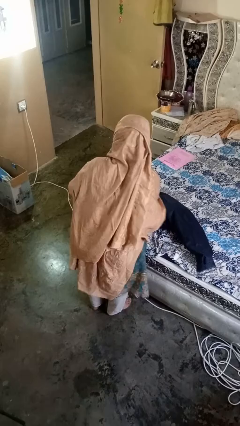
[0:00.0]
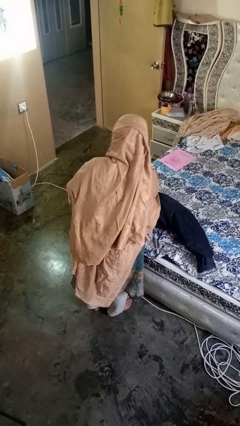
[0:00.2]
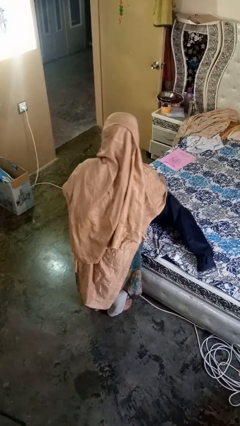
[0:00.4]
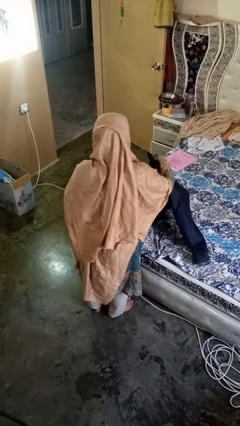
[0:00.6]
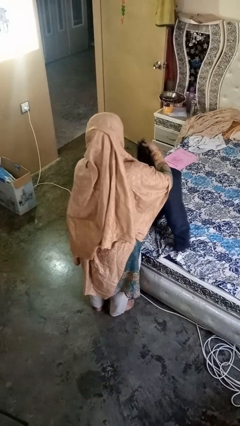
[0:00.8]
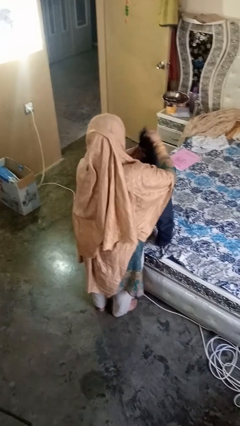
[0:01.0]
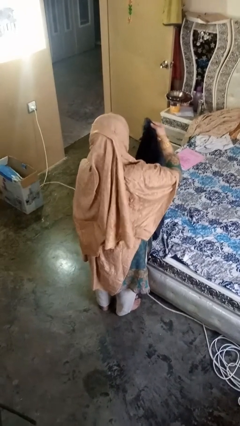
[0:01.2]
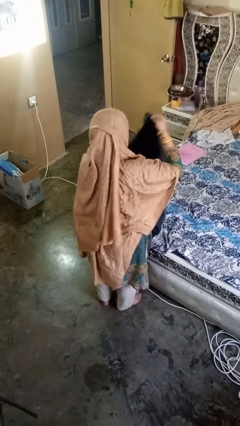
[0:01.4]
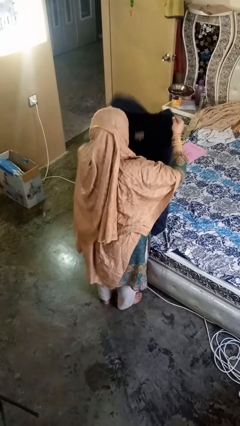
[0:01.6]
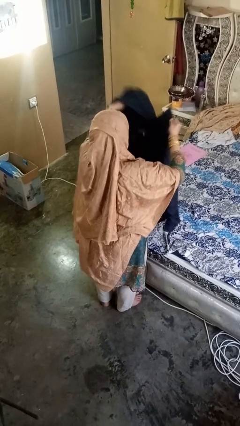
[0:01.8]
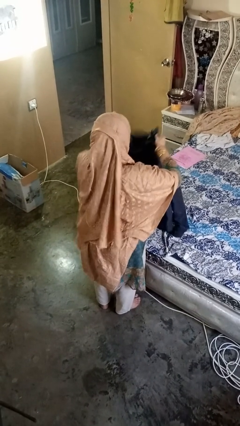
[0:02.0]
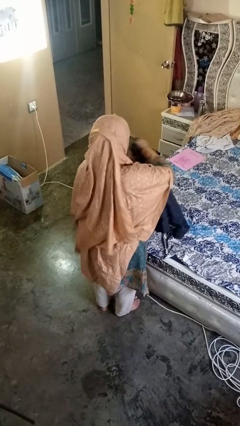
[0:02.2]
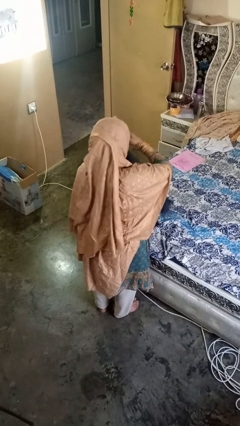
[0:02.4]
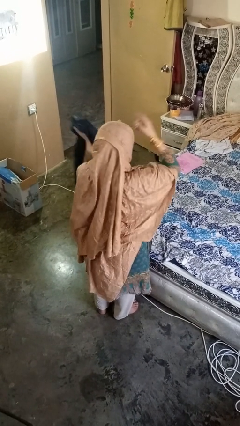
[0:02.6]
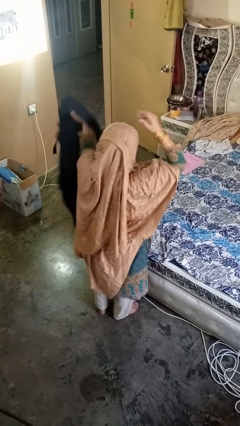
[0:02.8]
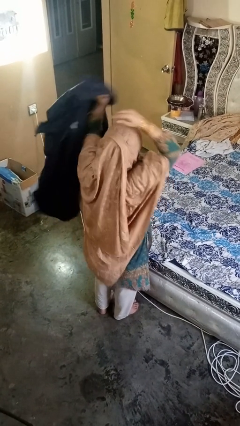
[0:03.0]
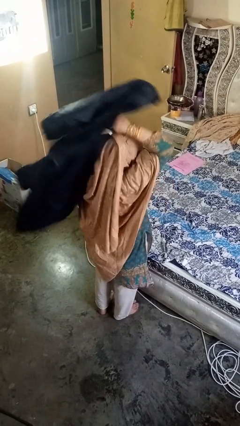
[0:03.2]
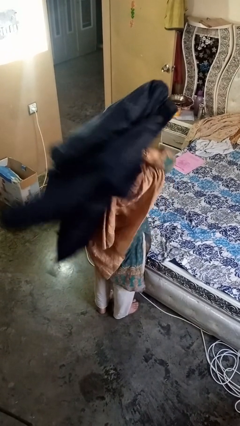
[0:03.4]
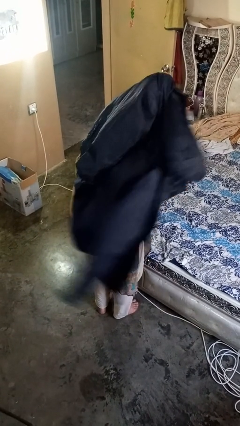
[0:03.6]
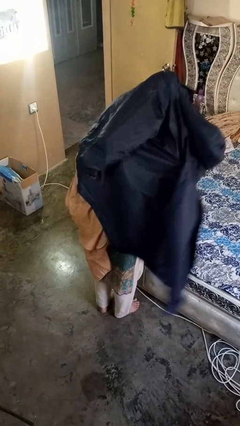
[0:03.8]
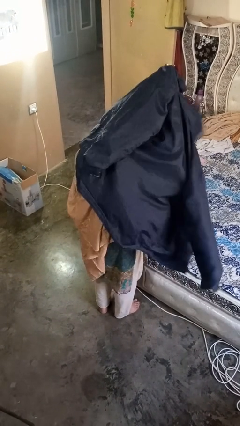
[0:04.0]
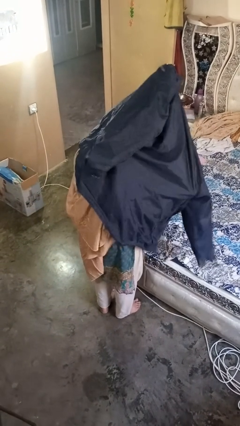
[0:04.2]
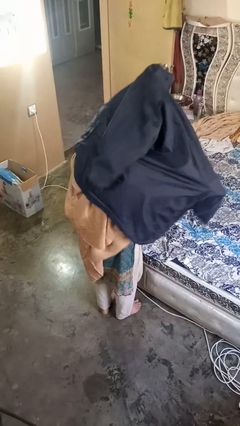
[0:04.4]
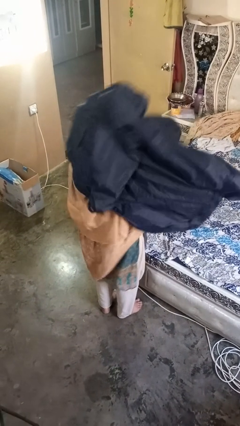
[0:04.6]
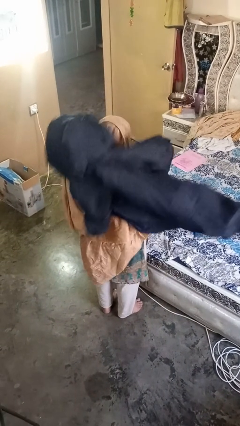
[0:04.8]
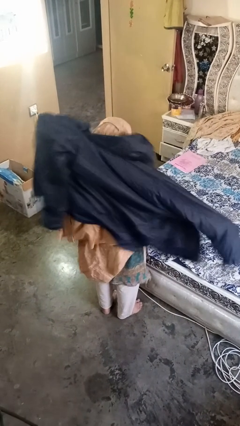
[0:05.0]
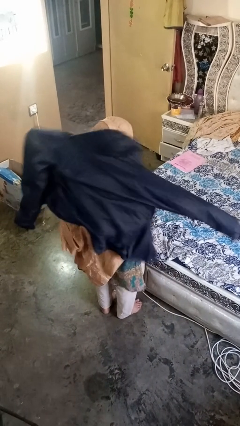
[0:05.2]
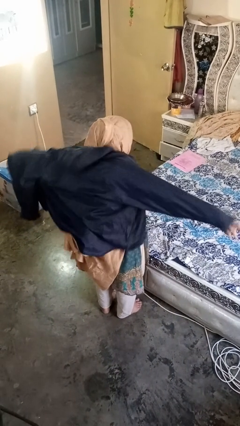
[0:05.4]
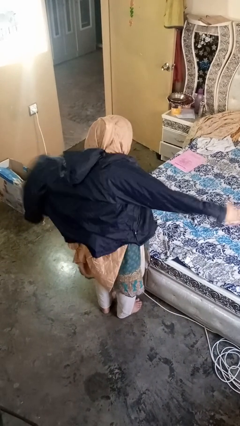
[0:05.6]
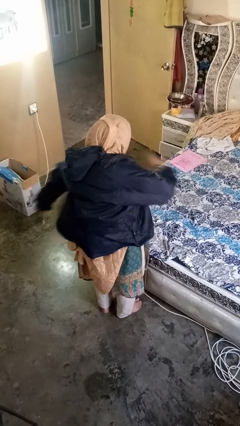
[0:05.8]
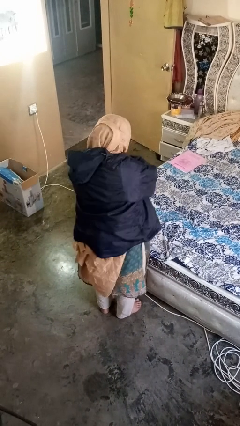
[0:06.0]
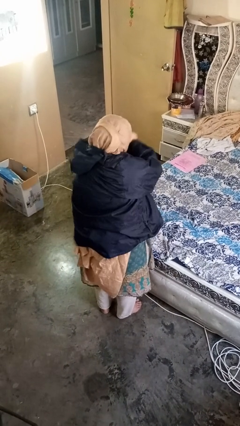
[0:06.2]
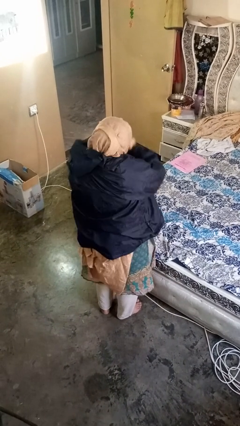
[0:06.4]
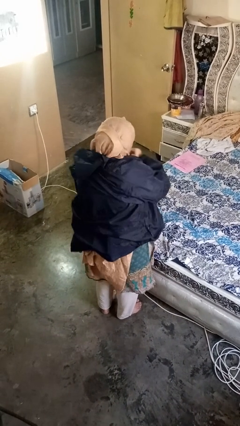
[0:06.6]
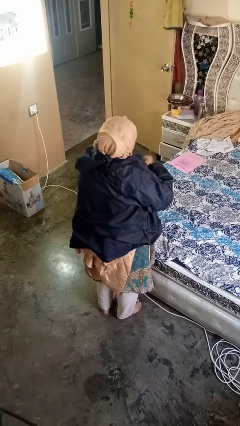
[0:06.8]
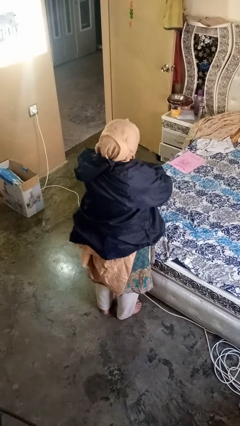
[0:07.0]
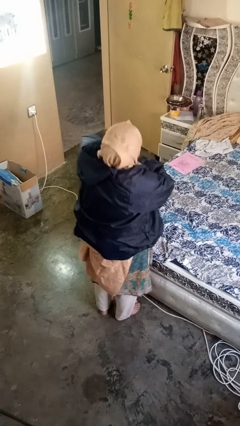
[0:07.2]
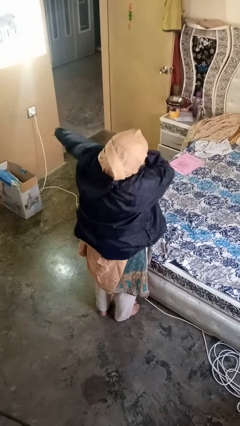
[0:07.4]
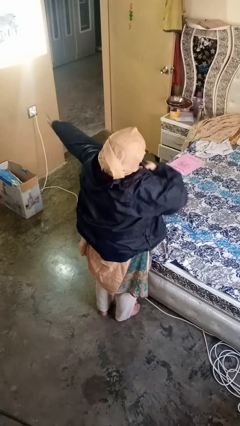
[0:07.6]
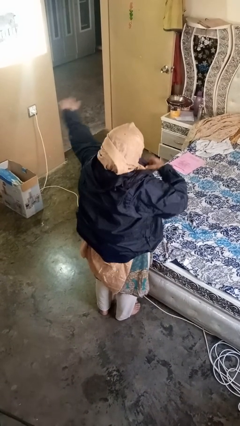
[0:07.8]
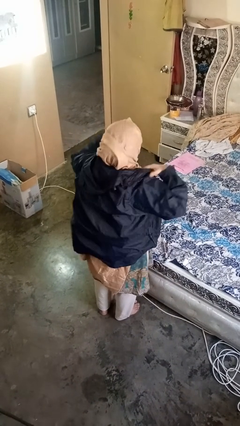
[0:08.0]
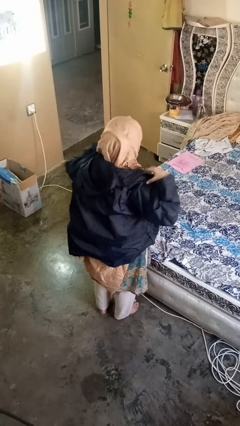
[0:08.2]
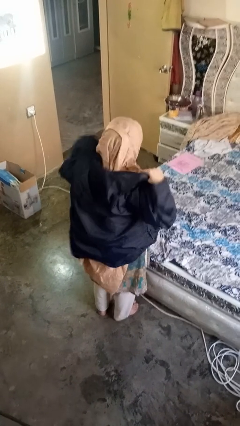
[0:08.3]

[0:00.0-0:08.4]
person puts on jacket

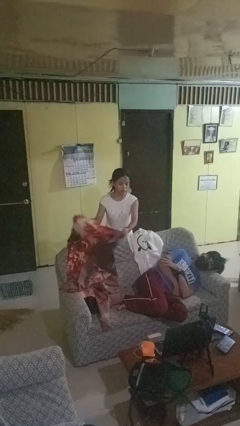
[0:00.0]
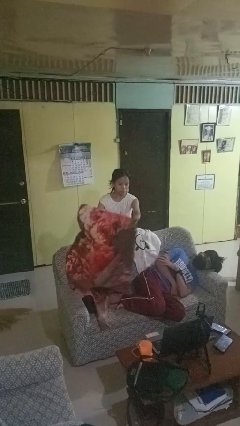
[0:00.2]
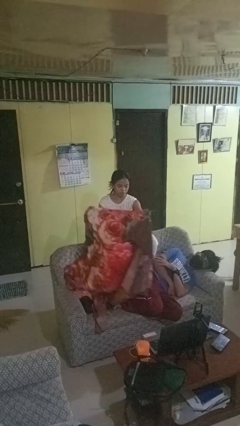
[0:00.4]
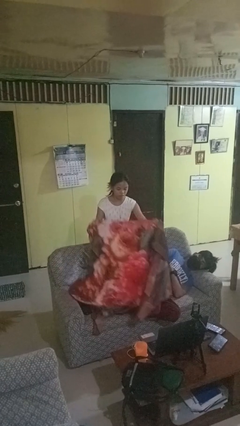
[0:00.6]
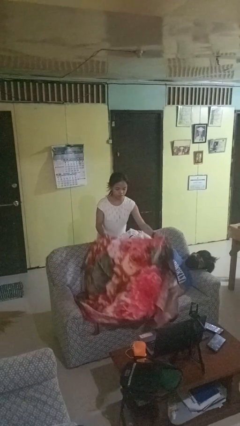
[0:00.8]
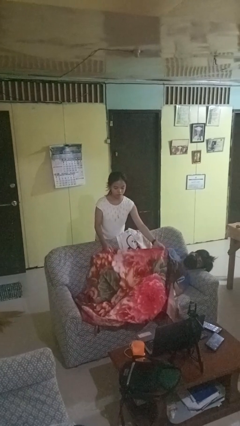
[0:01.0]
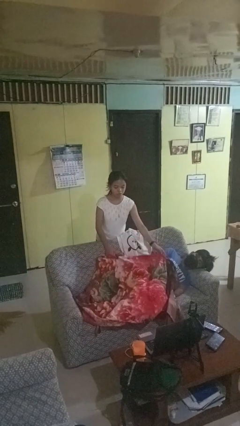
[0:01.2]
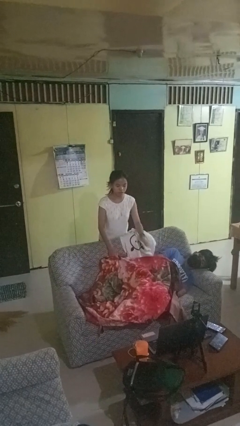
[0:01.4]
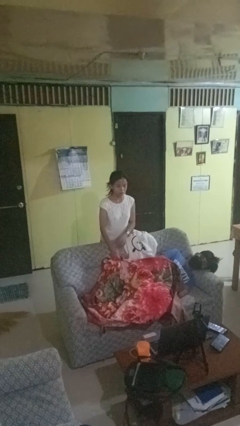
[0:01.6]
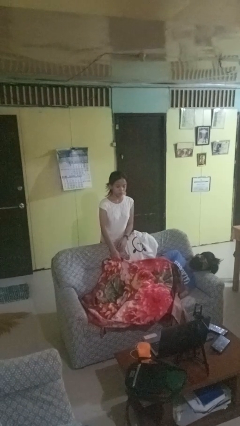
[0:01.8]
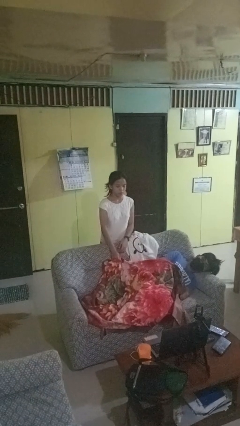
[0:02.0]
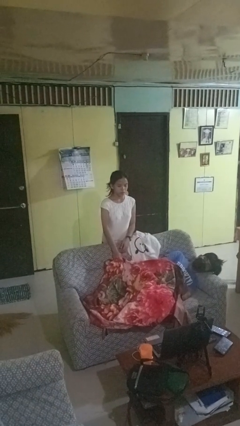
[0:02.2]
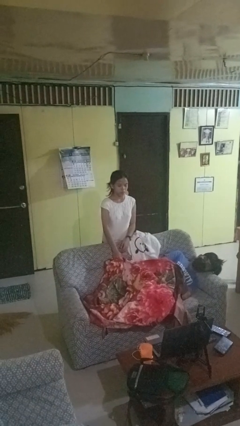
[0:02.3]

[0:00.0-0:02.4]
person covers friend with blanket

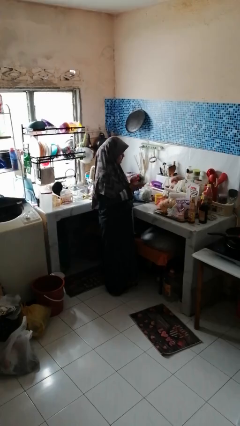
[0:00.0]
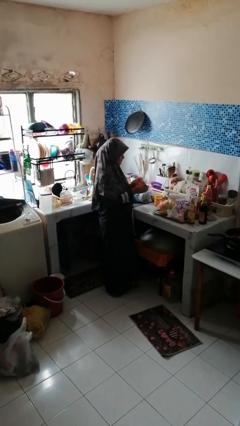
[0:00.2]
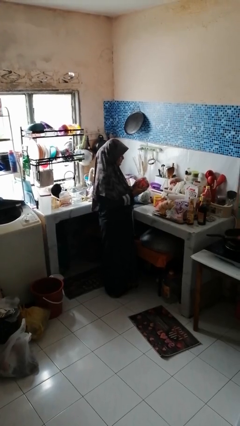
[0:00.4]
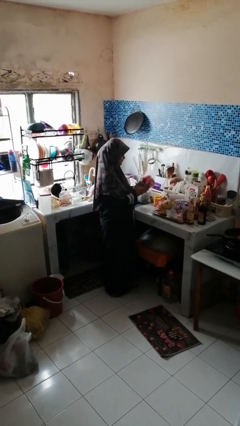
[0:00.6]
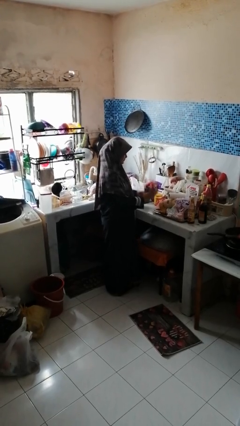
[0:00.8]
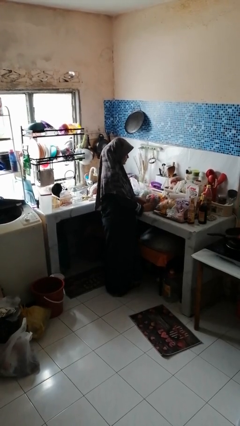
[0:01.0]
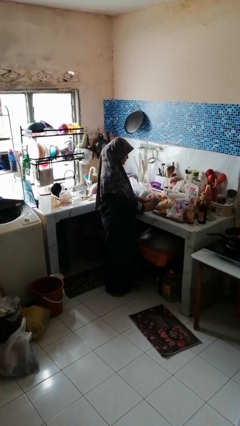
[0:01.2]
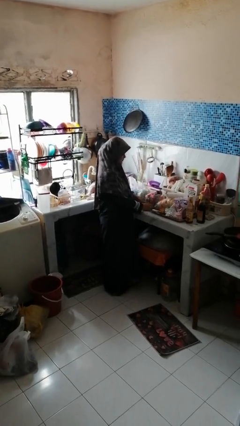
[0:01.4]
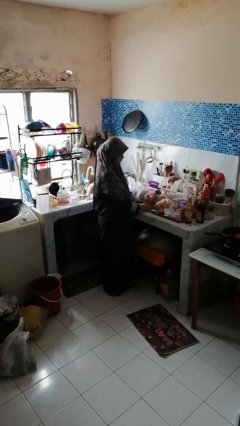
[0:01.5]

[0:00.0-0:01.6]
person puts down object on countertop

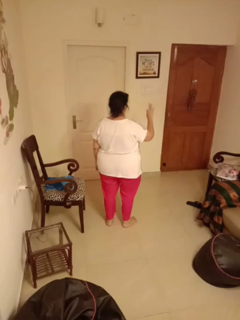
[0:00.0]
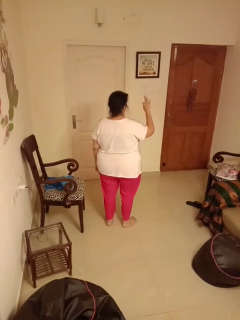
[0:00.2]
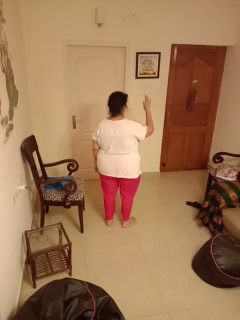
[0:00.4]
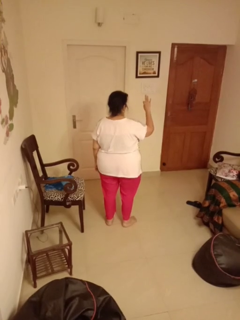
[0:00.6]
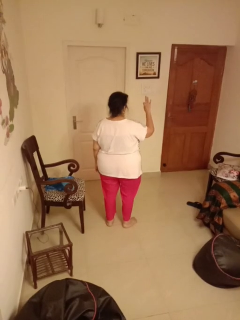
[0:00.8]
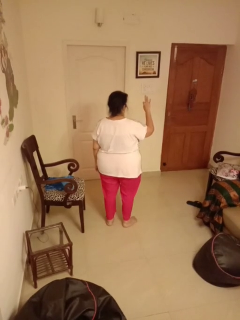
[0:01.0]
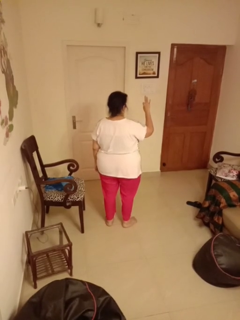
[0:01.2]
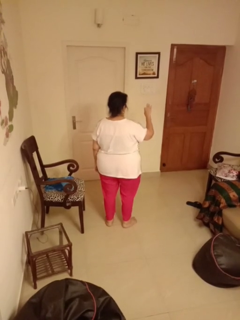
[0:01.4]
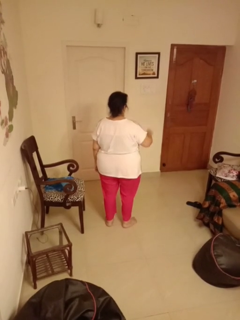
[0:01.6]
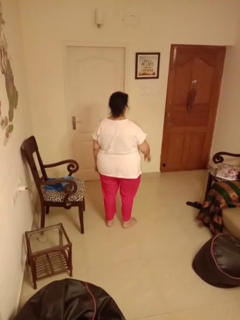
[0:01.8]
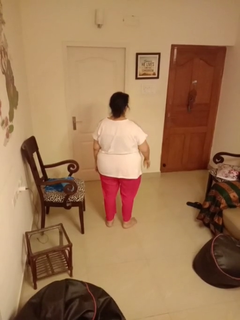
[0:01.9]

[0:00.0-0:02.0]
person gestures number three

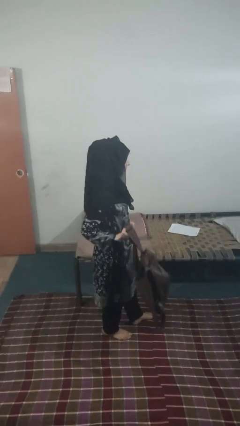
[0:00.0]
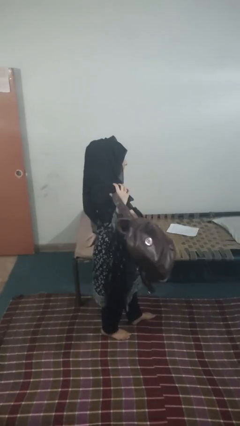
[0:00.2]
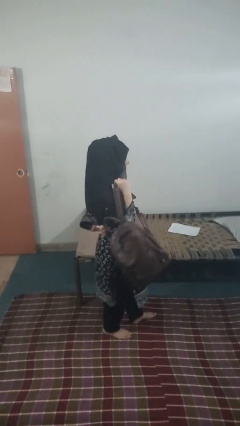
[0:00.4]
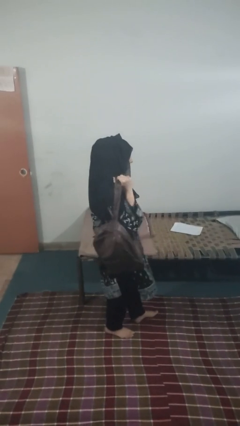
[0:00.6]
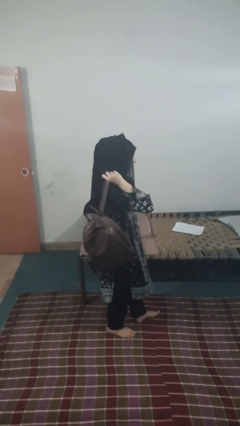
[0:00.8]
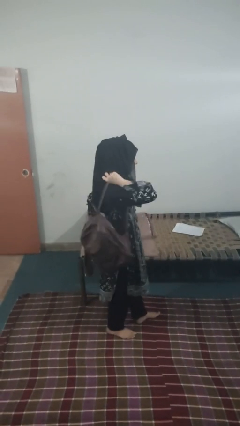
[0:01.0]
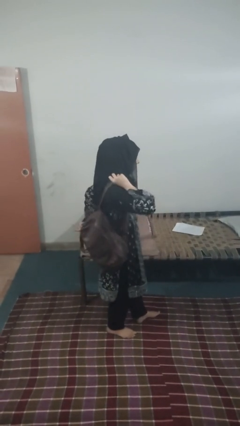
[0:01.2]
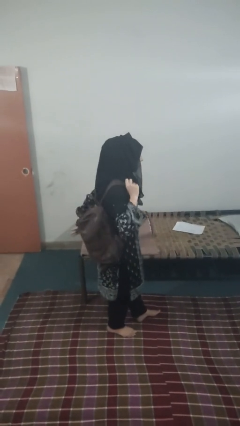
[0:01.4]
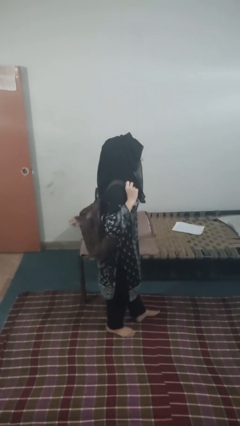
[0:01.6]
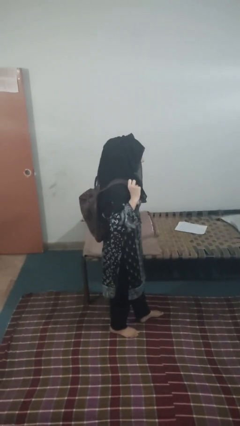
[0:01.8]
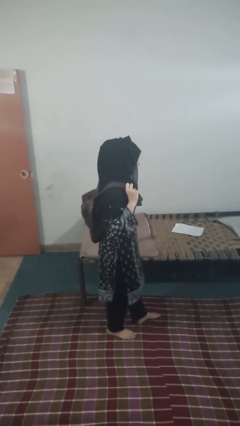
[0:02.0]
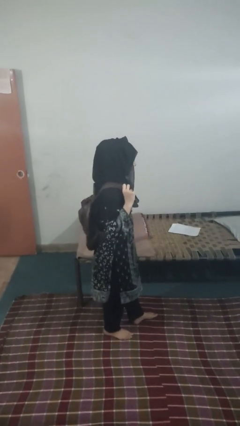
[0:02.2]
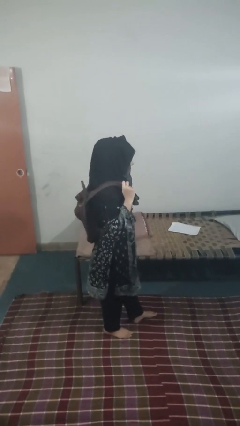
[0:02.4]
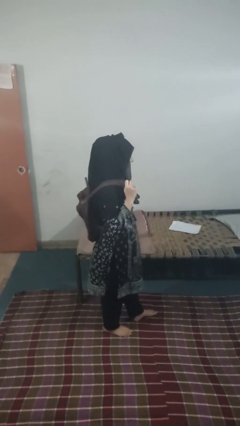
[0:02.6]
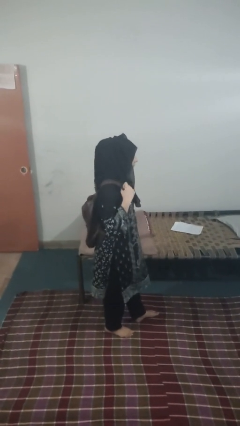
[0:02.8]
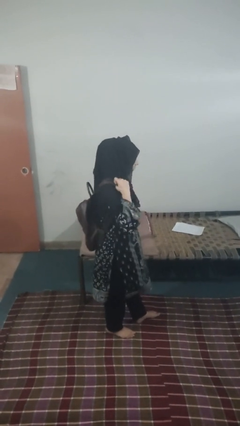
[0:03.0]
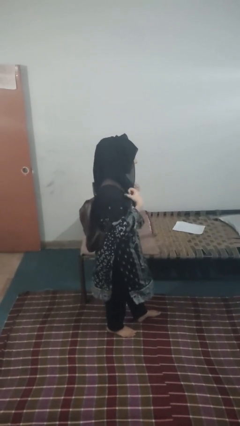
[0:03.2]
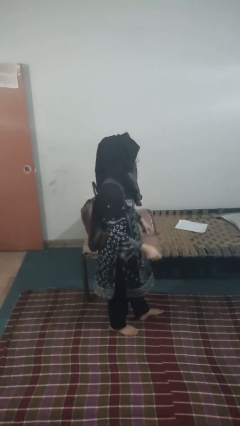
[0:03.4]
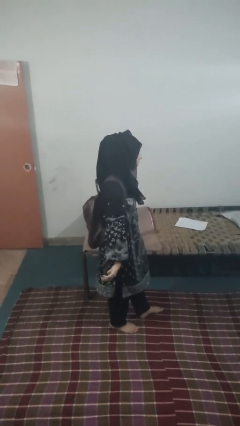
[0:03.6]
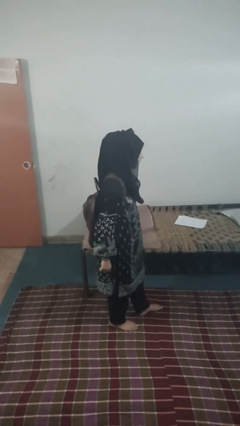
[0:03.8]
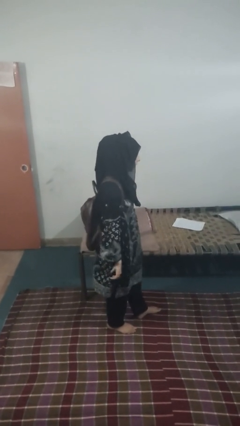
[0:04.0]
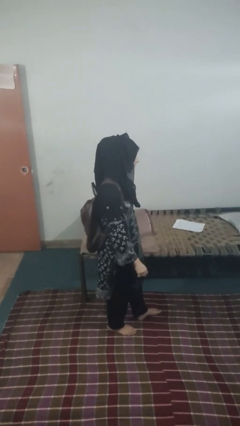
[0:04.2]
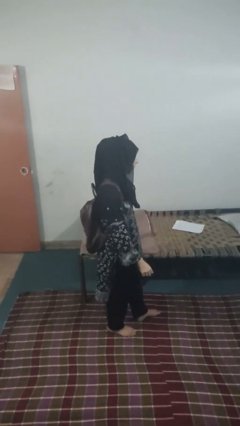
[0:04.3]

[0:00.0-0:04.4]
person puts on backpack
